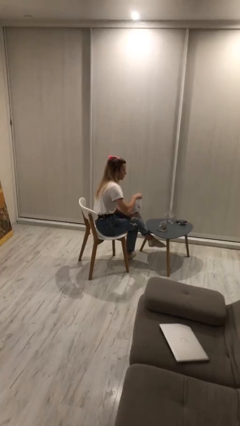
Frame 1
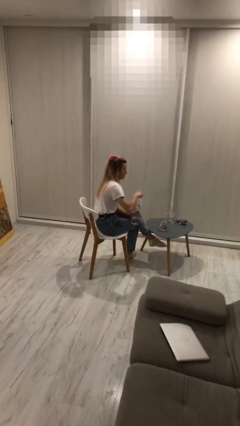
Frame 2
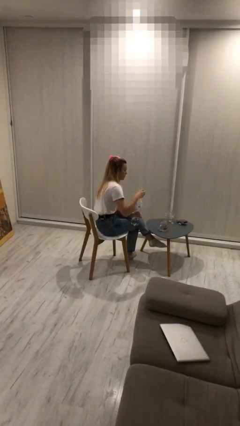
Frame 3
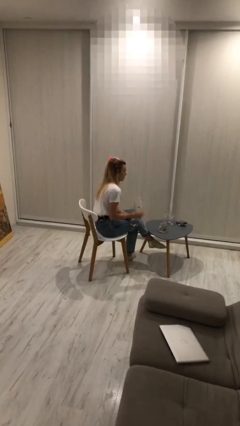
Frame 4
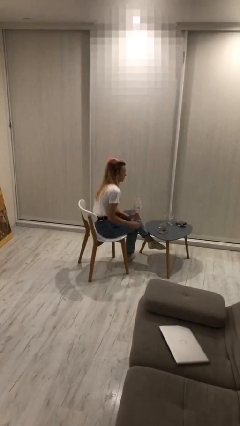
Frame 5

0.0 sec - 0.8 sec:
person unscrews lid from bottle

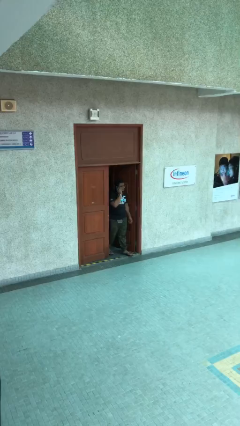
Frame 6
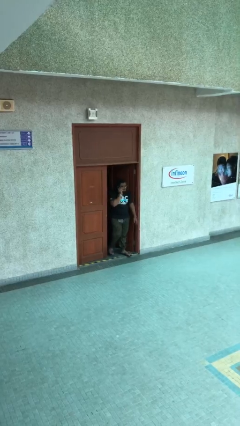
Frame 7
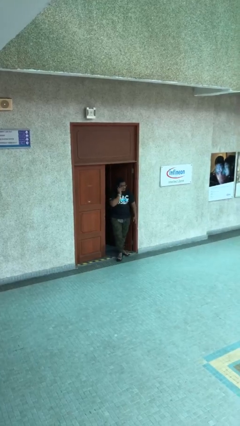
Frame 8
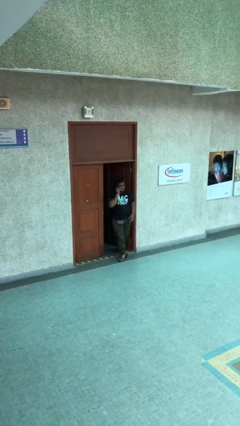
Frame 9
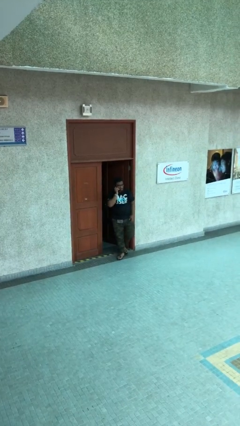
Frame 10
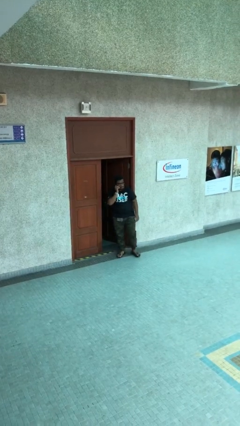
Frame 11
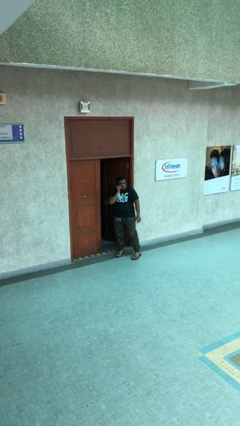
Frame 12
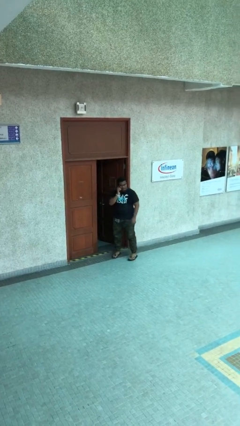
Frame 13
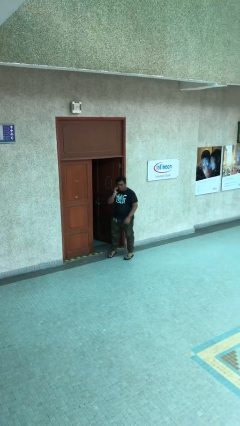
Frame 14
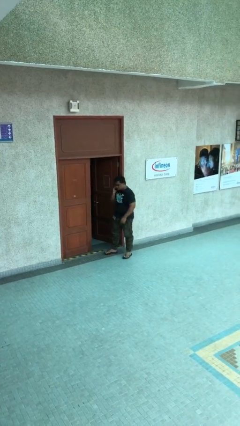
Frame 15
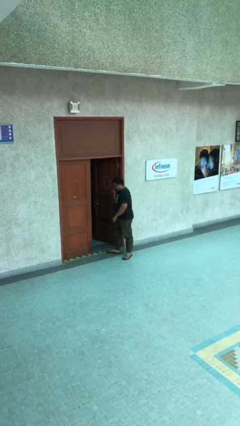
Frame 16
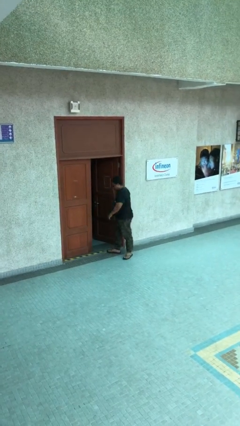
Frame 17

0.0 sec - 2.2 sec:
person enters scene through structure

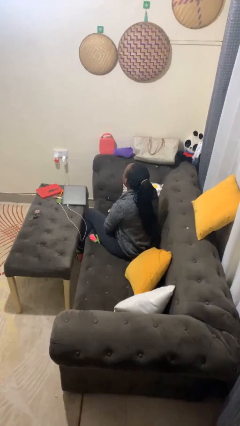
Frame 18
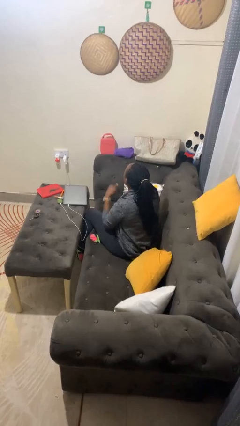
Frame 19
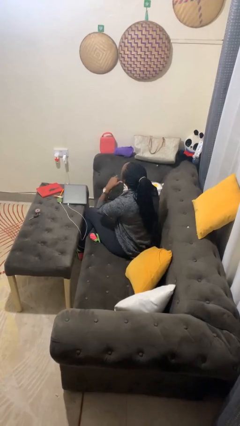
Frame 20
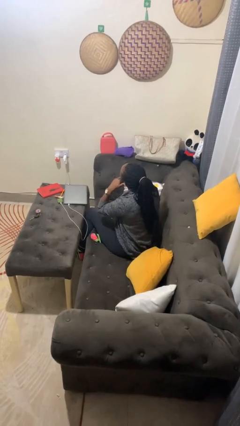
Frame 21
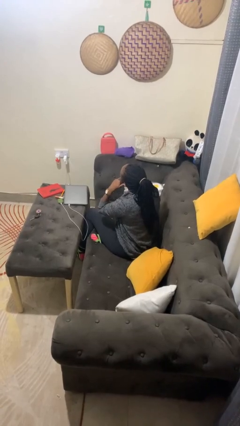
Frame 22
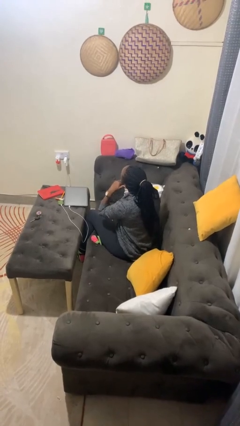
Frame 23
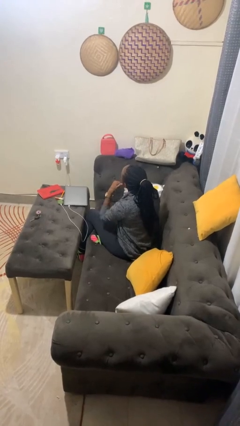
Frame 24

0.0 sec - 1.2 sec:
person gestures call me

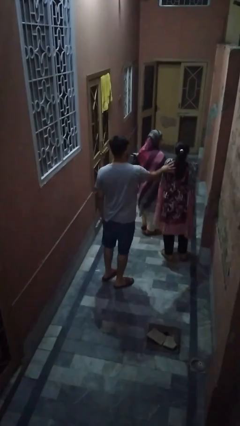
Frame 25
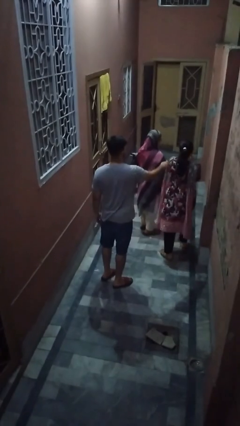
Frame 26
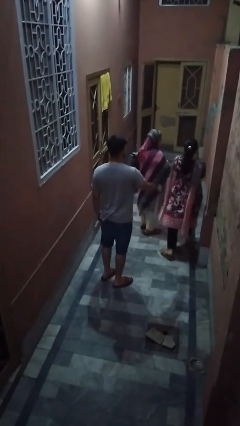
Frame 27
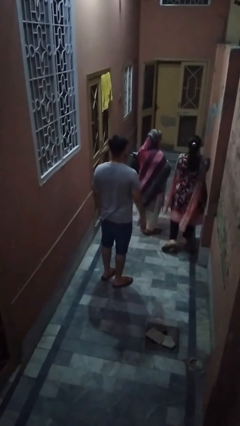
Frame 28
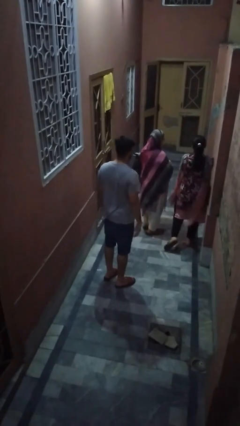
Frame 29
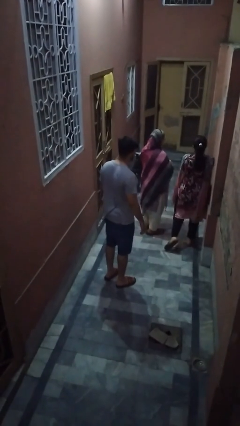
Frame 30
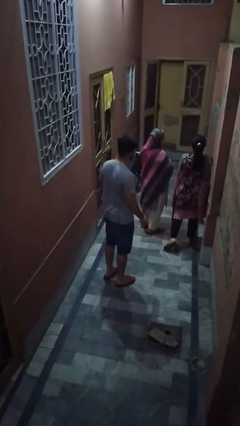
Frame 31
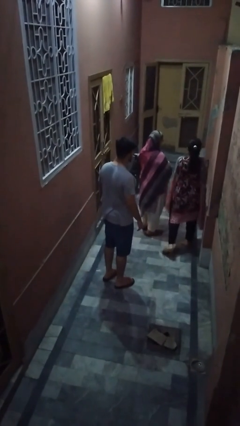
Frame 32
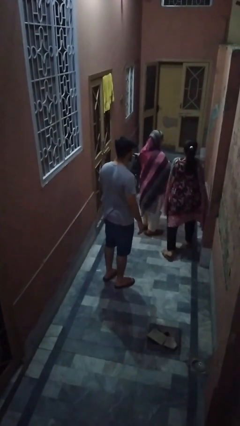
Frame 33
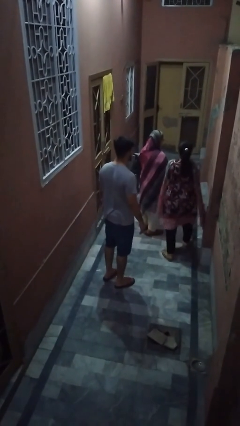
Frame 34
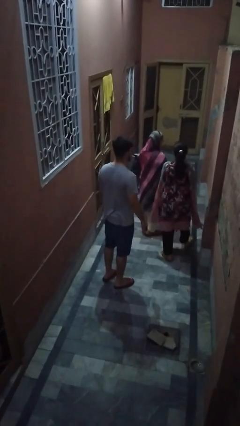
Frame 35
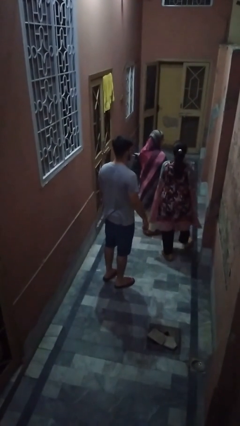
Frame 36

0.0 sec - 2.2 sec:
person shoves person

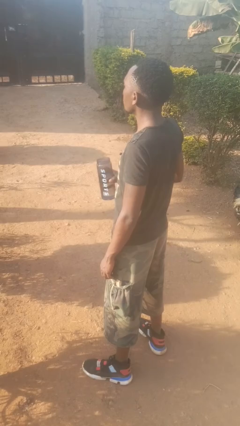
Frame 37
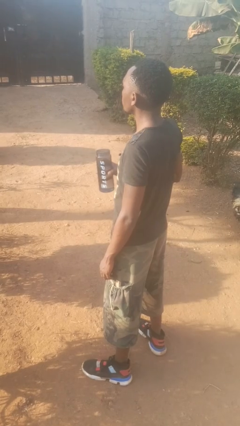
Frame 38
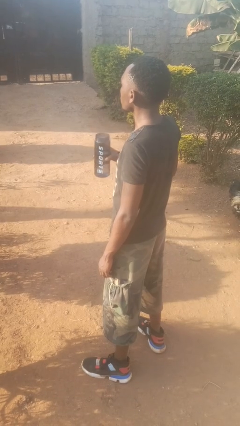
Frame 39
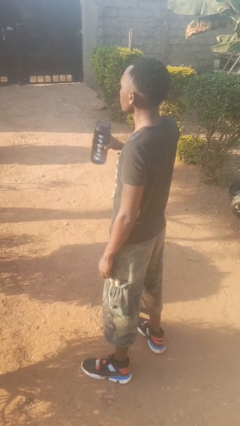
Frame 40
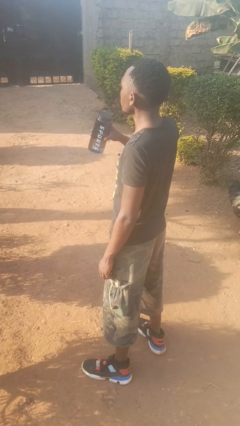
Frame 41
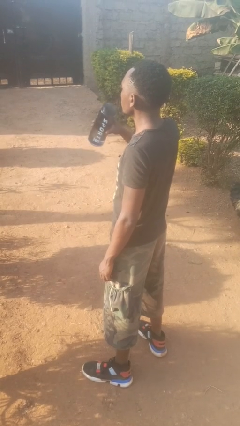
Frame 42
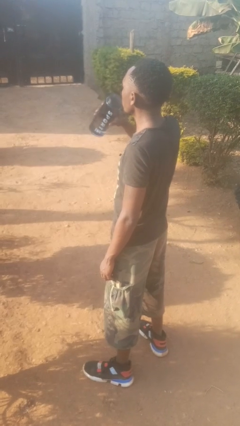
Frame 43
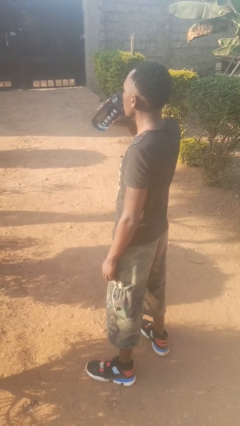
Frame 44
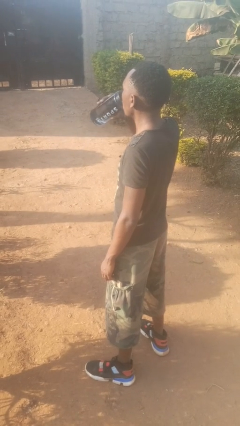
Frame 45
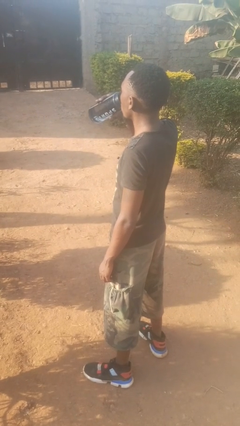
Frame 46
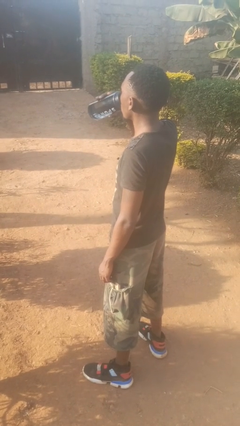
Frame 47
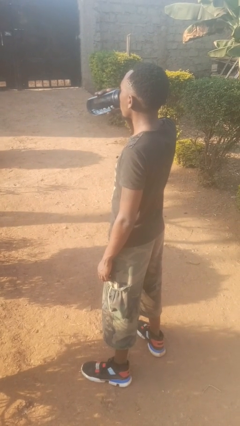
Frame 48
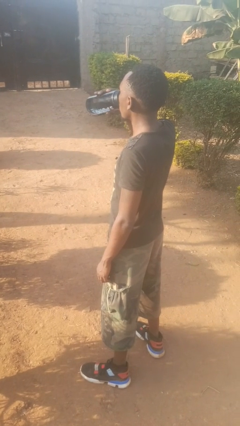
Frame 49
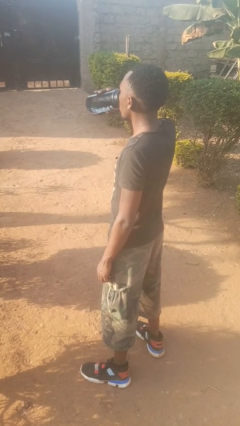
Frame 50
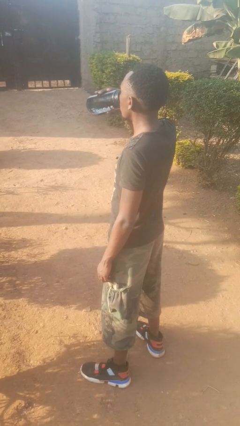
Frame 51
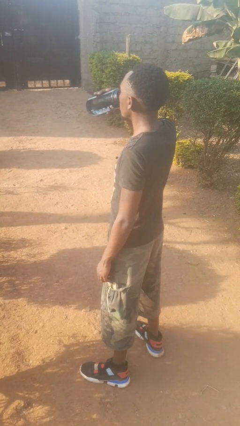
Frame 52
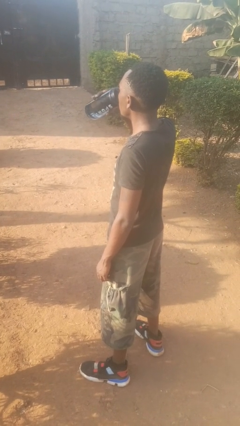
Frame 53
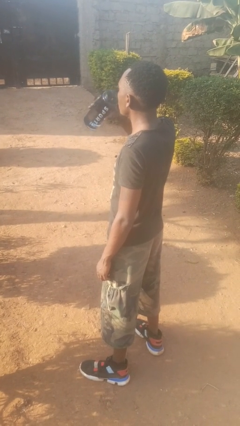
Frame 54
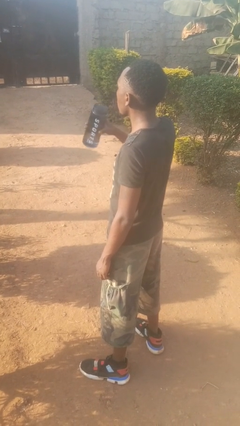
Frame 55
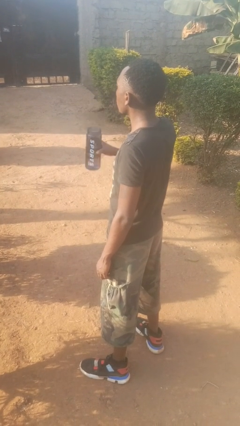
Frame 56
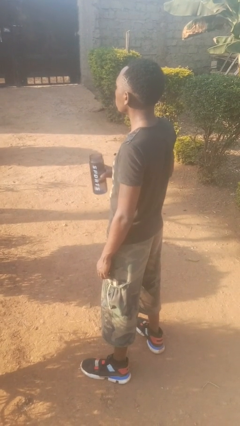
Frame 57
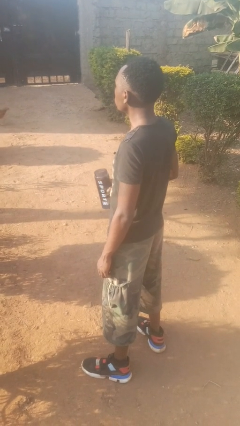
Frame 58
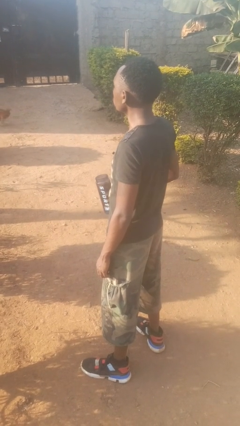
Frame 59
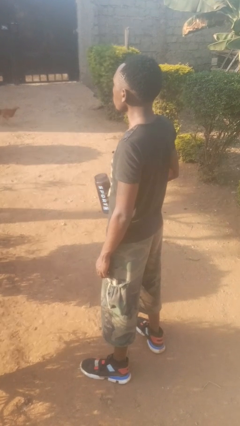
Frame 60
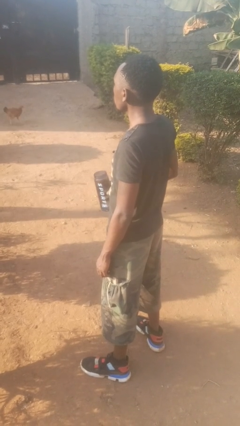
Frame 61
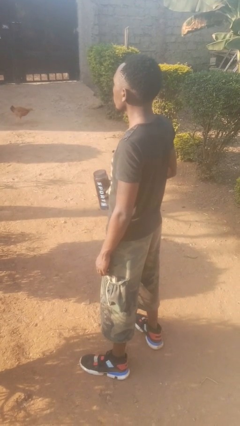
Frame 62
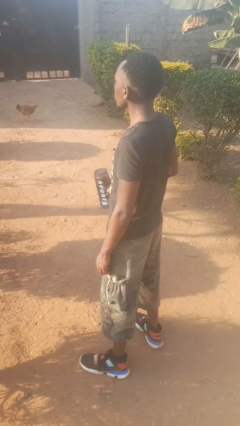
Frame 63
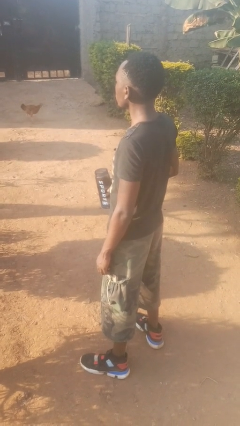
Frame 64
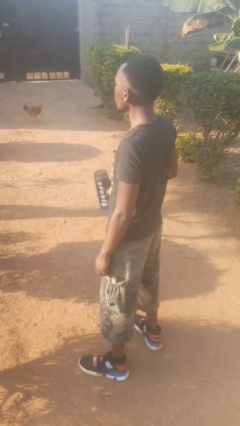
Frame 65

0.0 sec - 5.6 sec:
person drinks from bottle

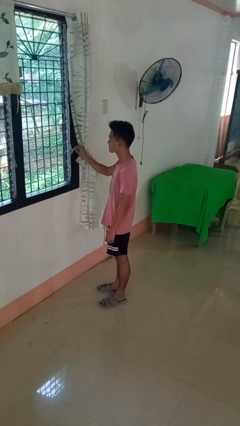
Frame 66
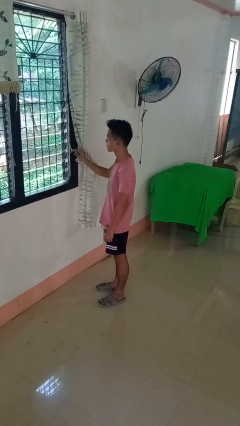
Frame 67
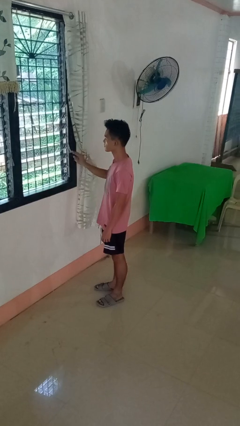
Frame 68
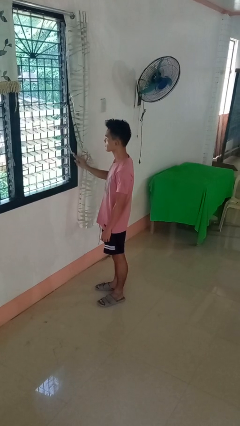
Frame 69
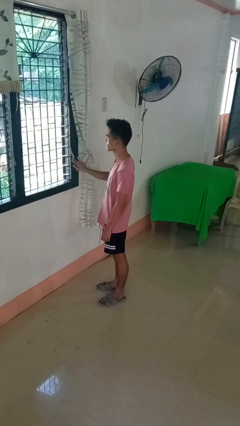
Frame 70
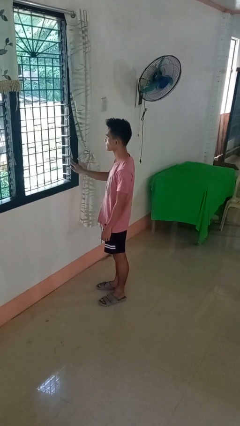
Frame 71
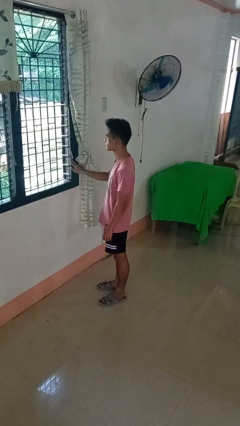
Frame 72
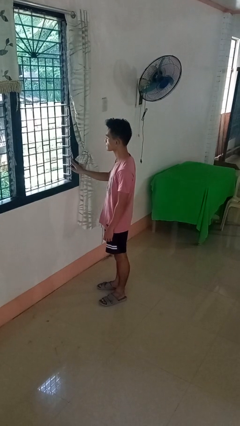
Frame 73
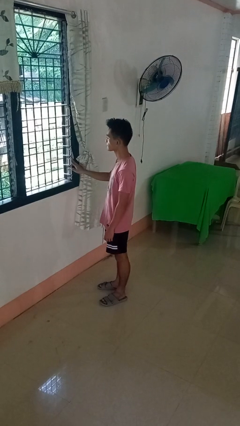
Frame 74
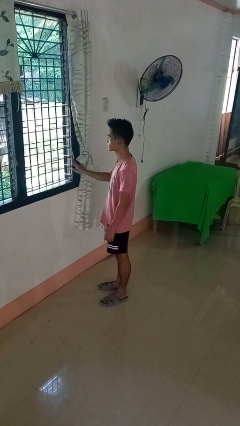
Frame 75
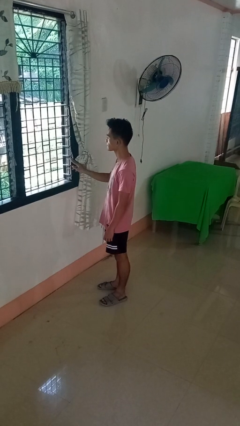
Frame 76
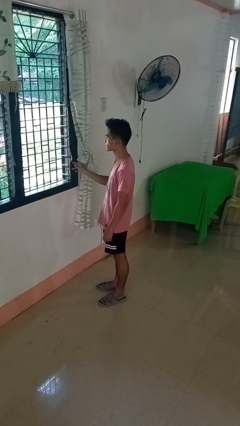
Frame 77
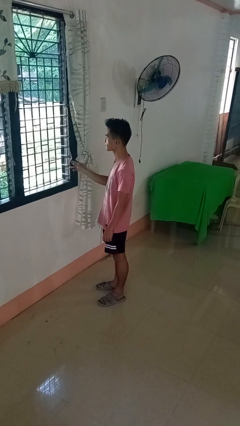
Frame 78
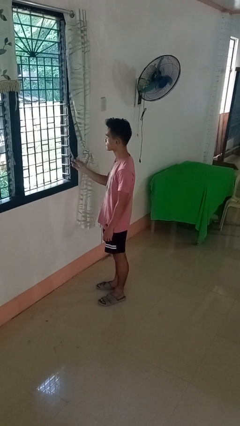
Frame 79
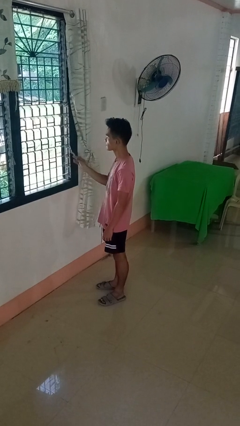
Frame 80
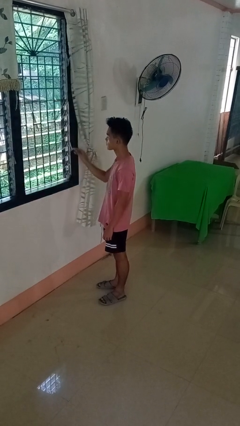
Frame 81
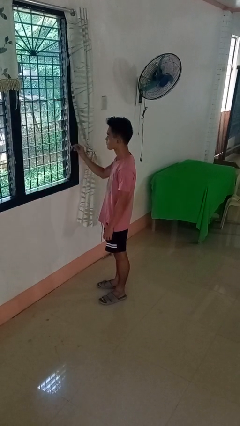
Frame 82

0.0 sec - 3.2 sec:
person opens home window

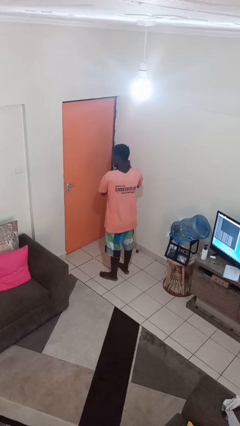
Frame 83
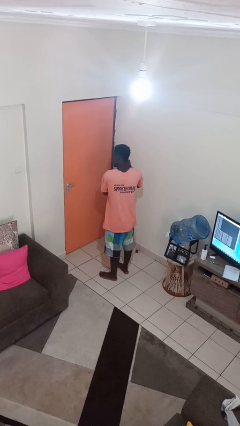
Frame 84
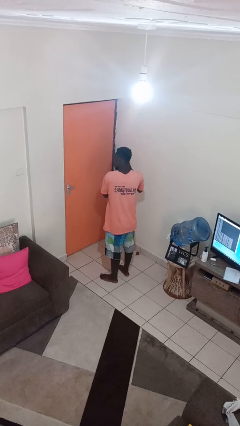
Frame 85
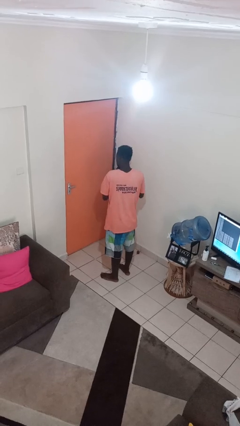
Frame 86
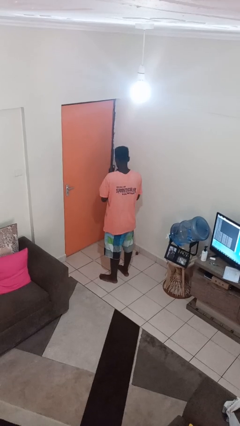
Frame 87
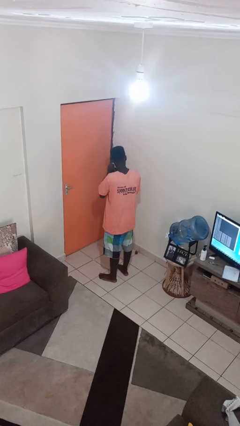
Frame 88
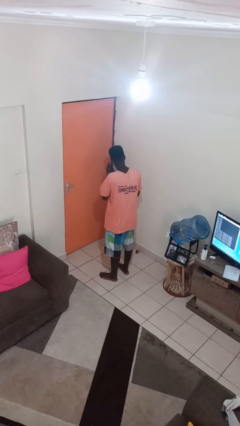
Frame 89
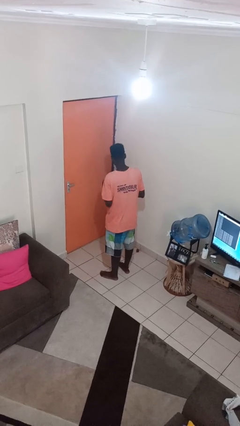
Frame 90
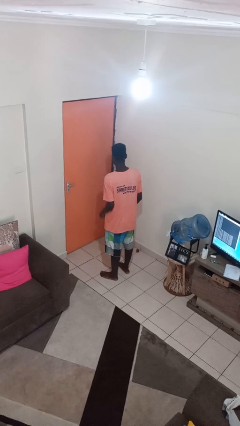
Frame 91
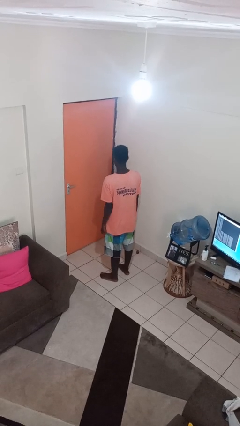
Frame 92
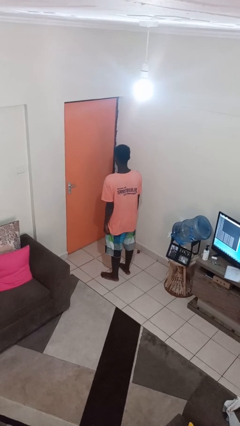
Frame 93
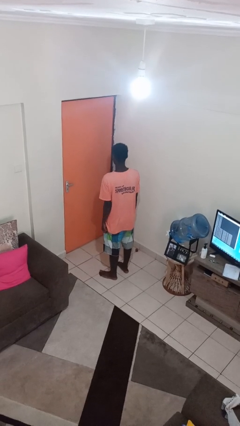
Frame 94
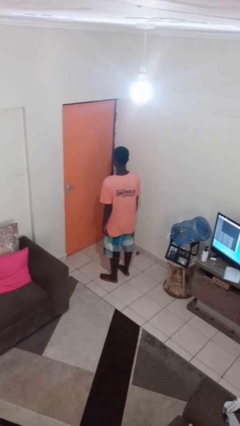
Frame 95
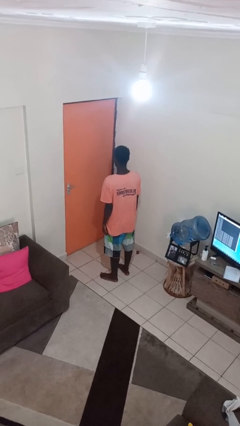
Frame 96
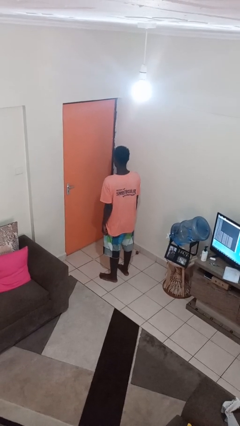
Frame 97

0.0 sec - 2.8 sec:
person takes off earrings
